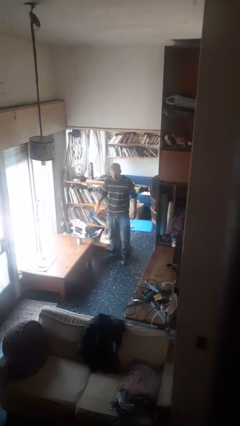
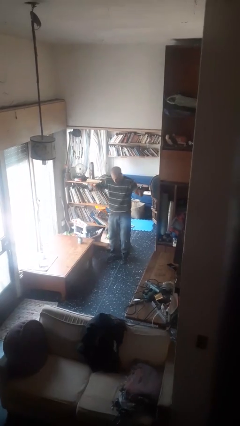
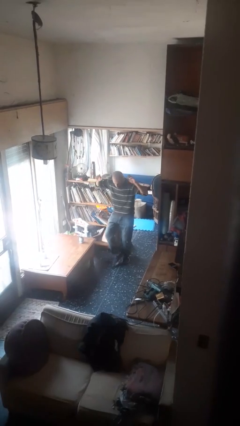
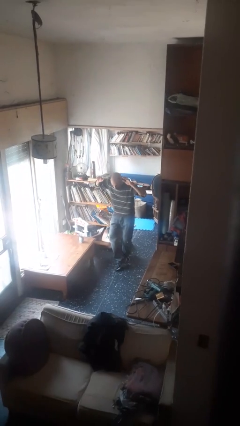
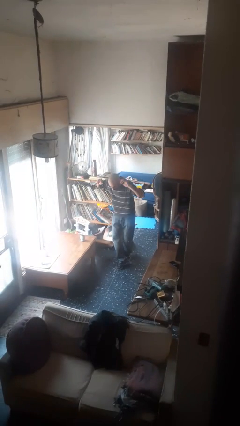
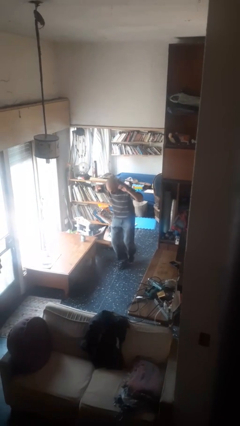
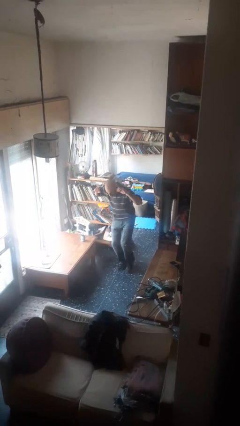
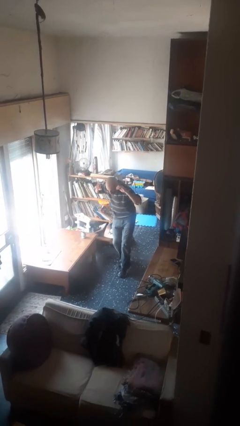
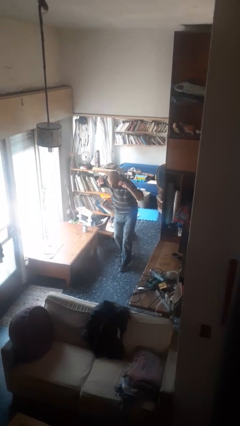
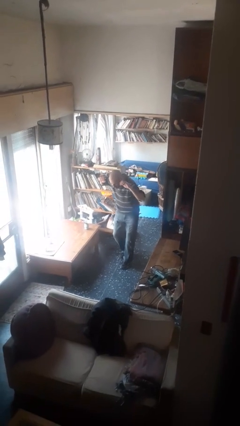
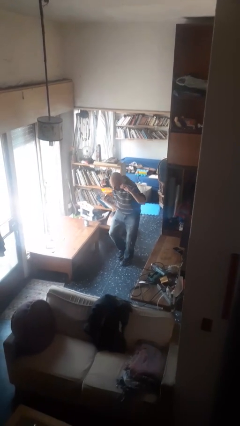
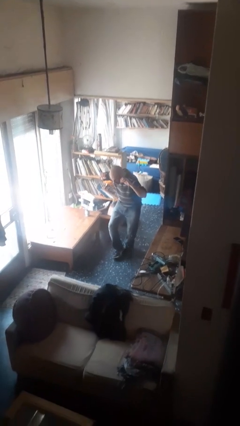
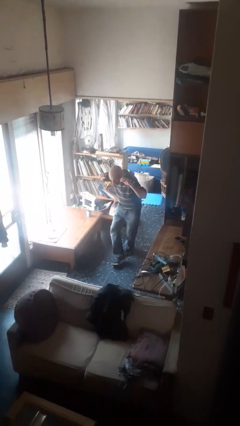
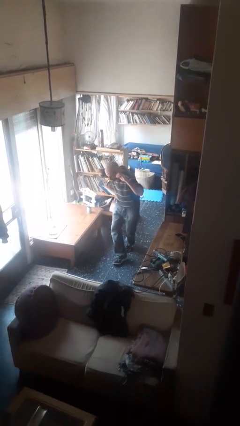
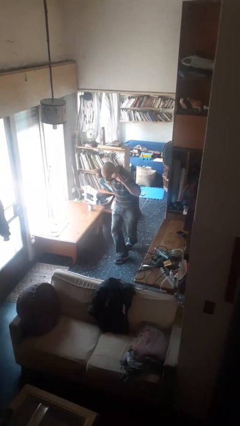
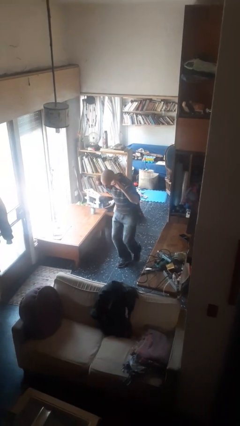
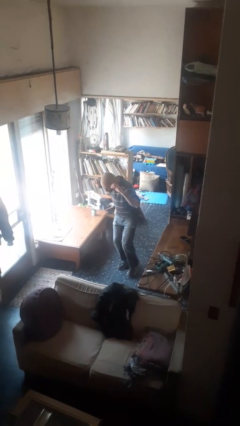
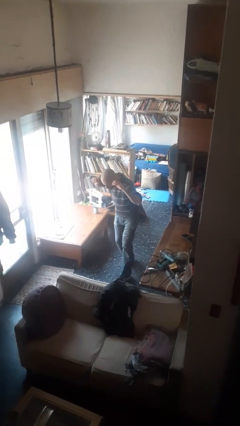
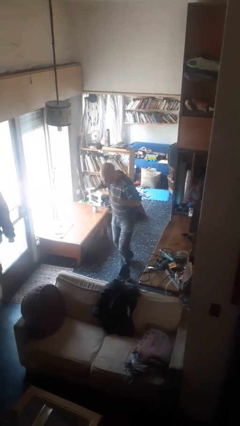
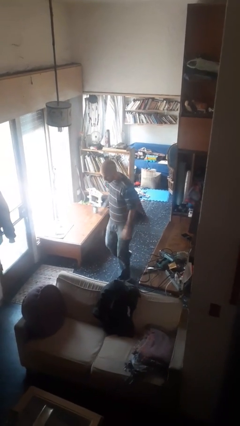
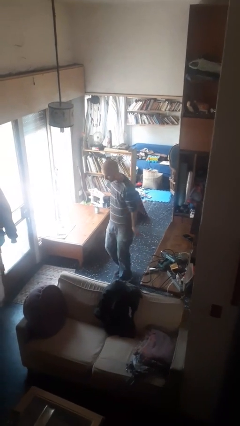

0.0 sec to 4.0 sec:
person walks tiptoe

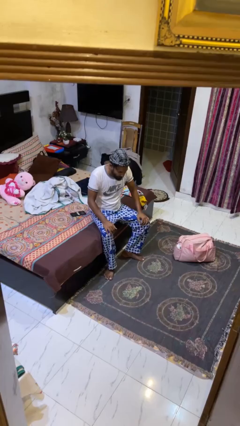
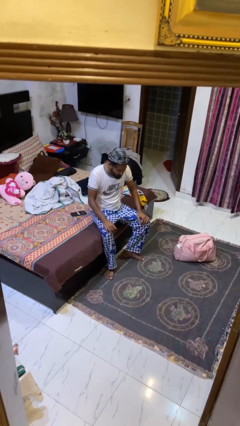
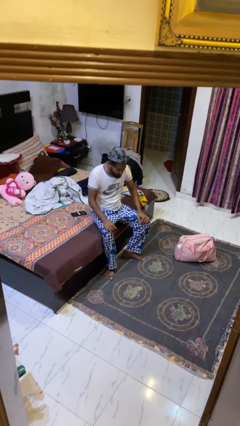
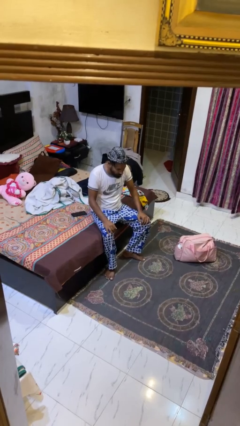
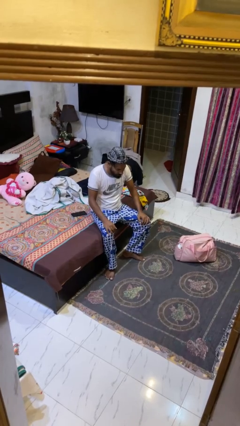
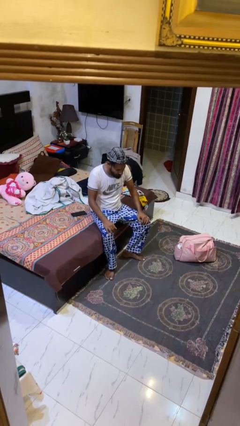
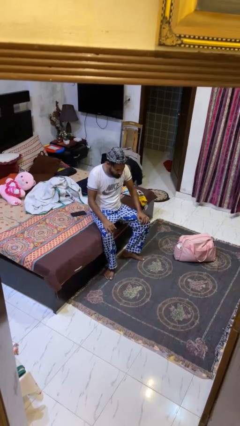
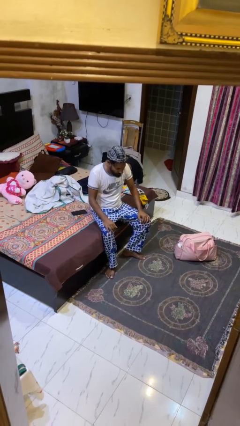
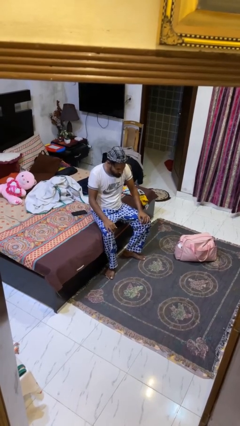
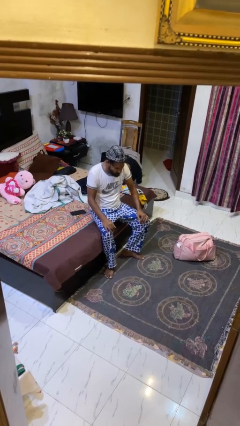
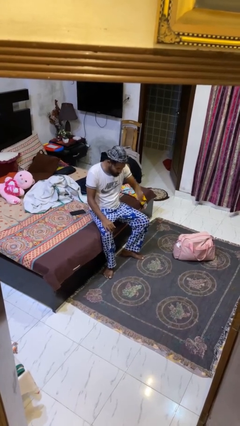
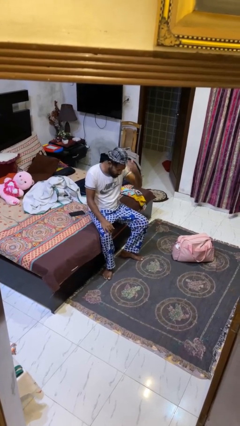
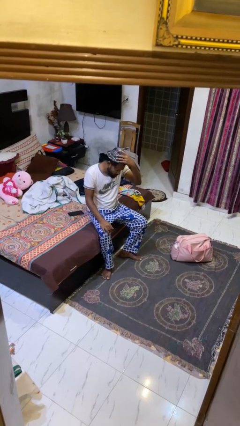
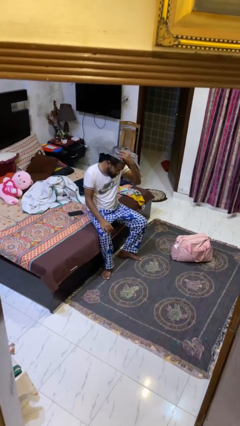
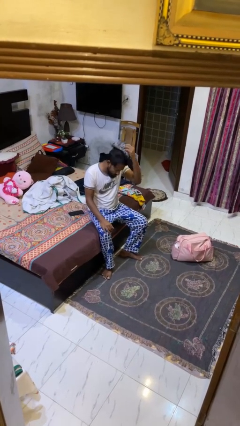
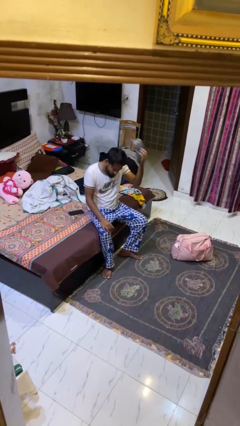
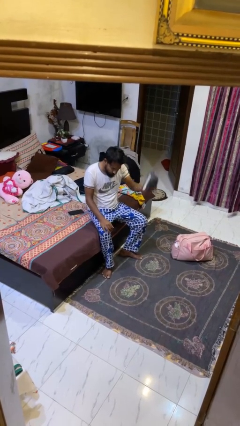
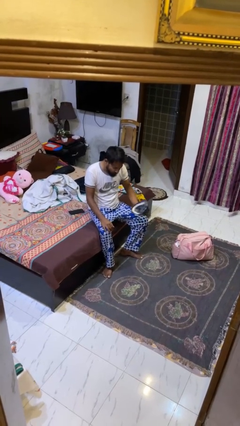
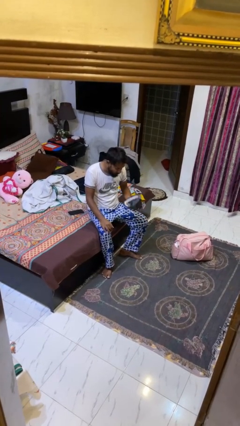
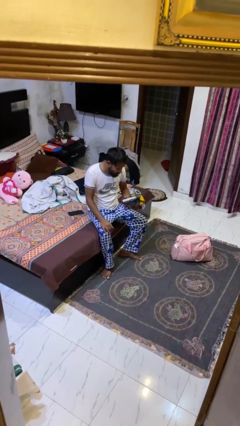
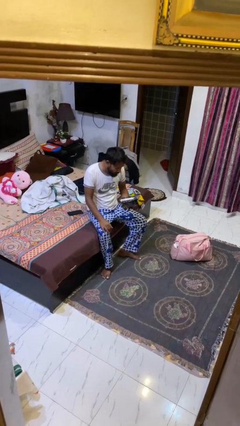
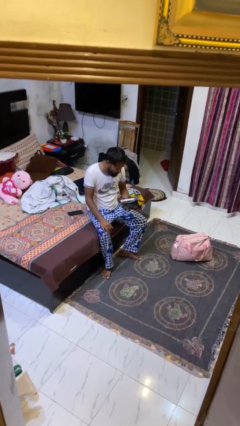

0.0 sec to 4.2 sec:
person takes off hat

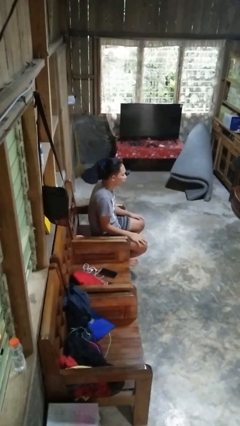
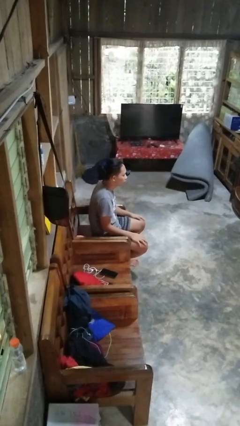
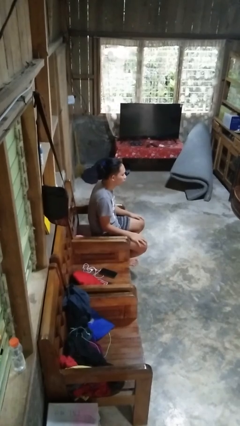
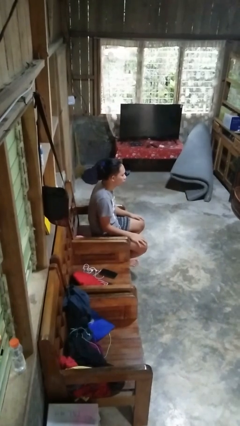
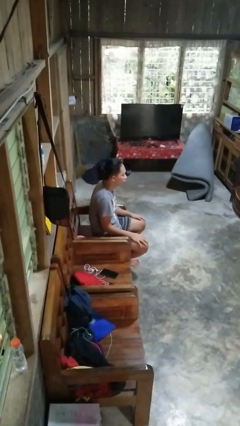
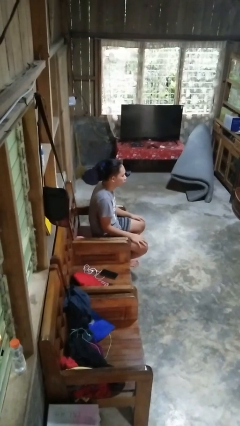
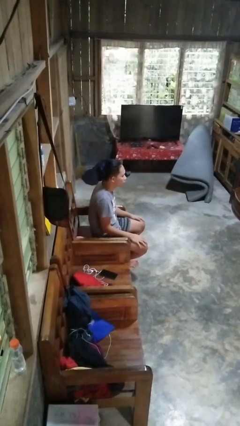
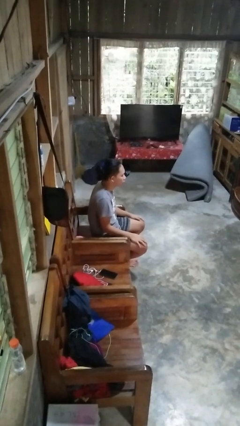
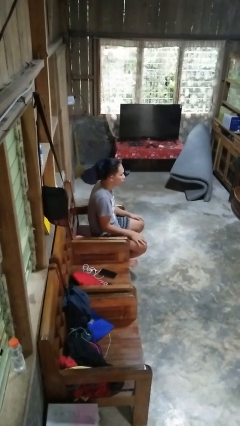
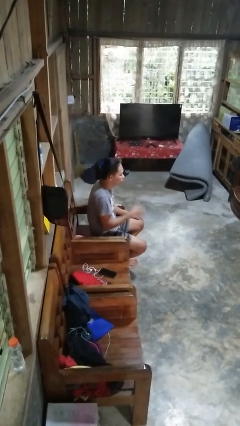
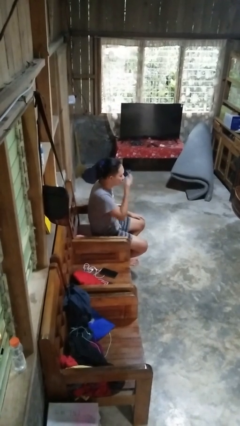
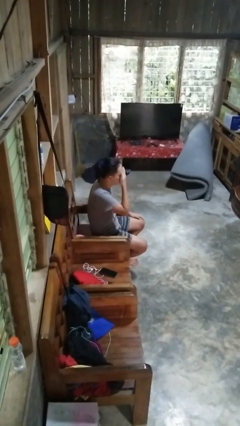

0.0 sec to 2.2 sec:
person covers face with hands

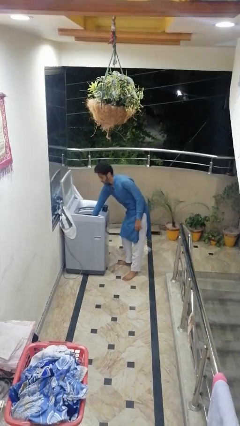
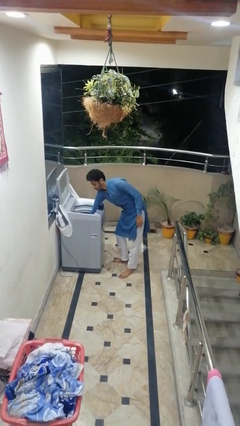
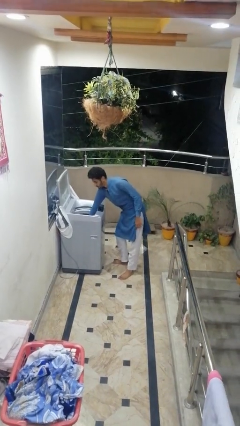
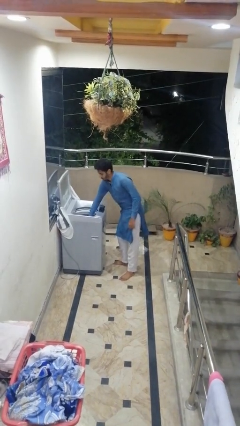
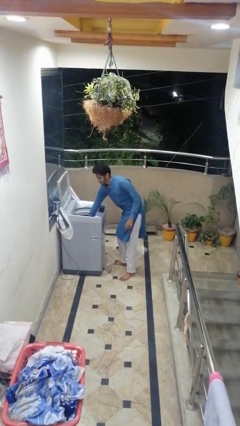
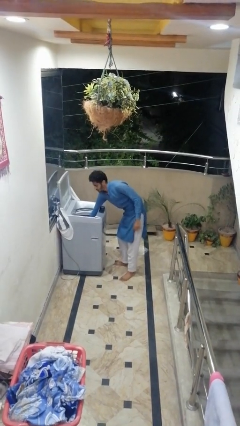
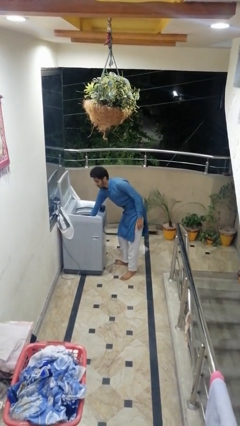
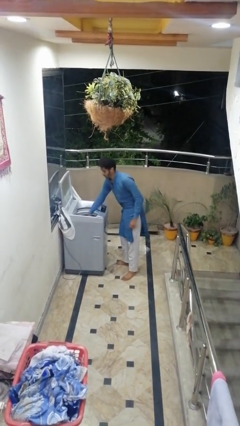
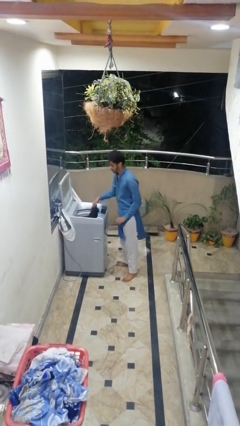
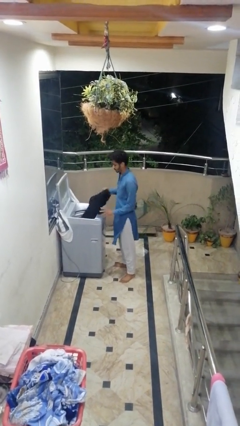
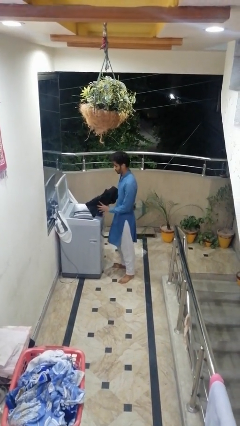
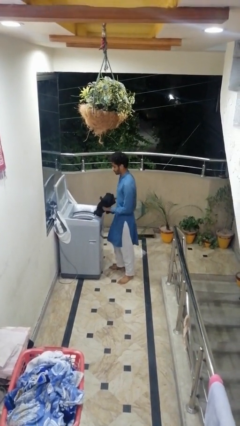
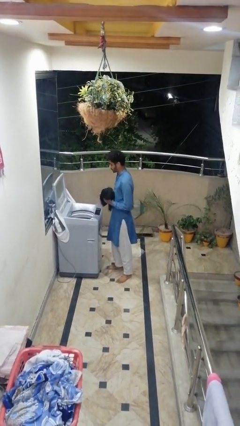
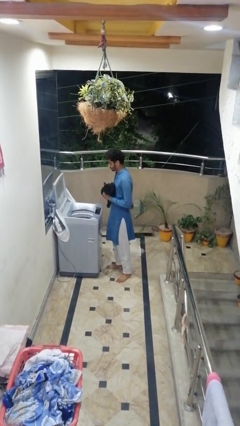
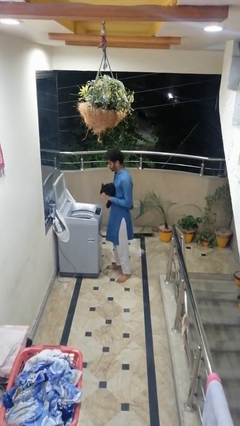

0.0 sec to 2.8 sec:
person loads clotheswasher

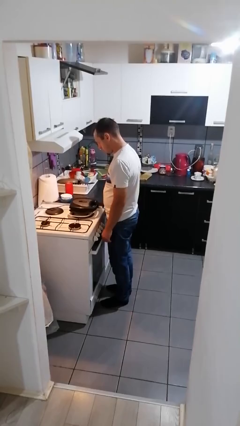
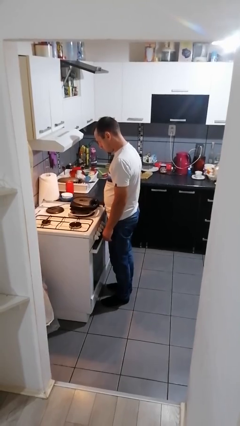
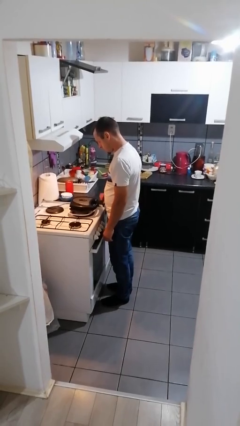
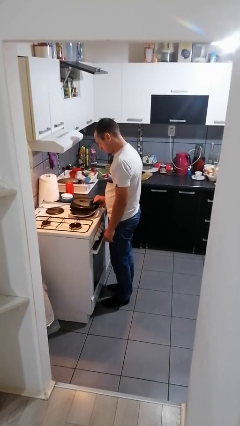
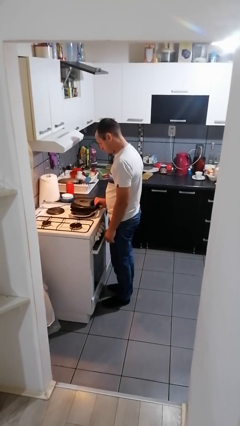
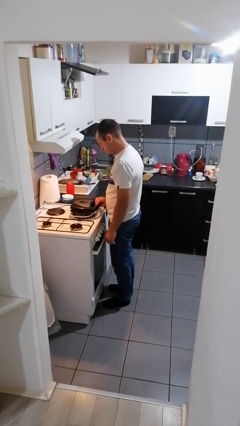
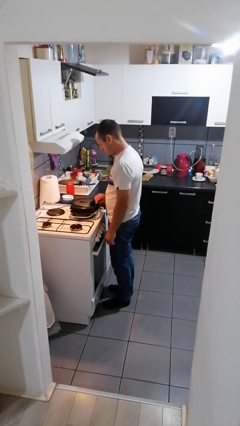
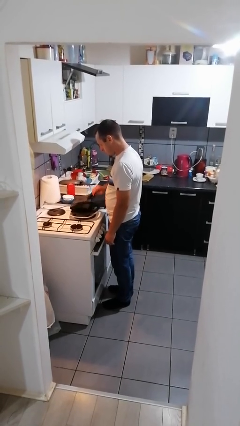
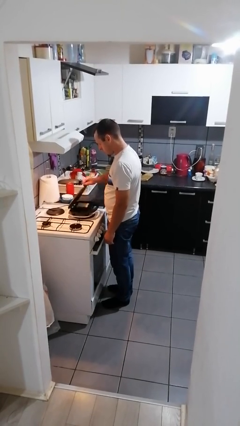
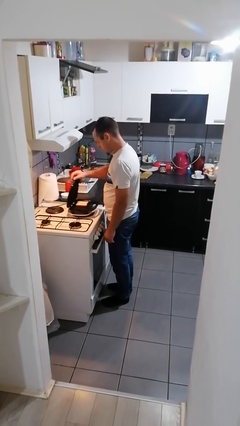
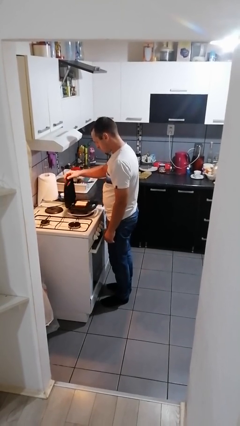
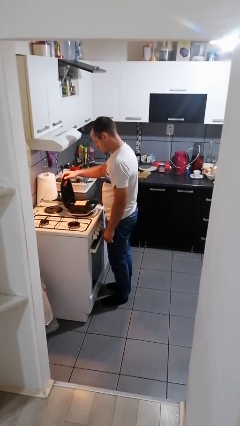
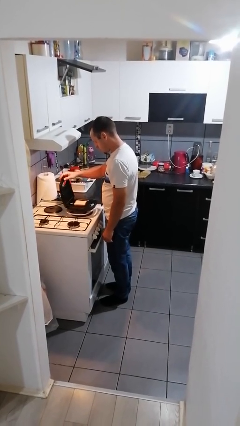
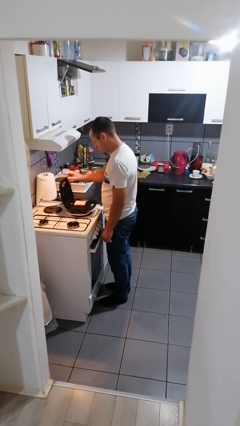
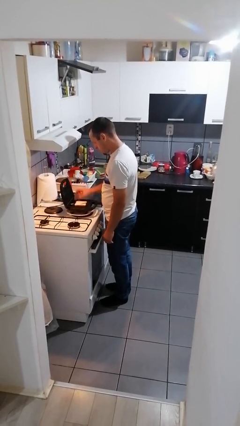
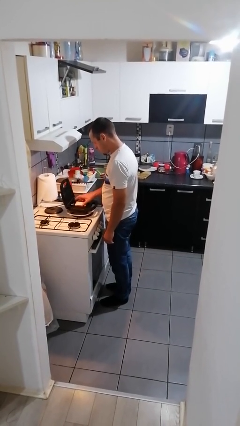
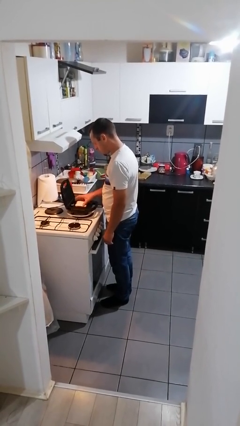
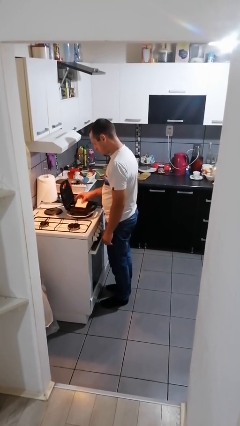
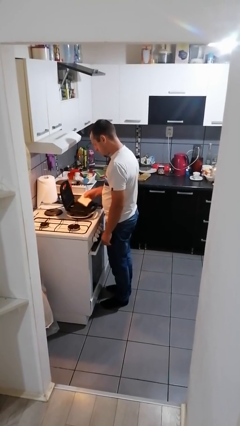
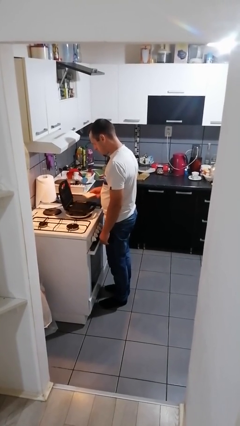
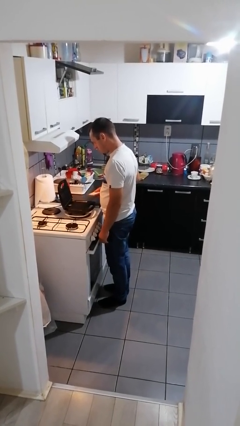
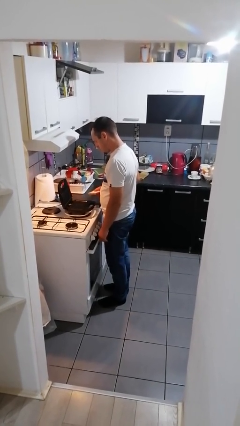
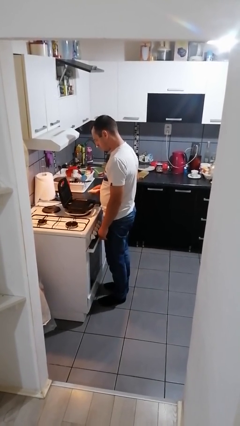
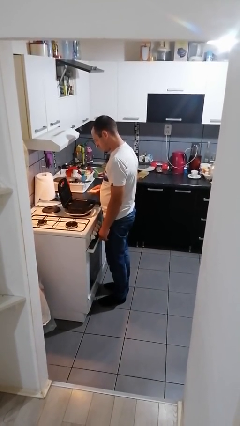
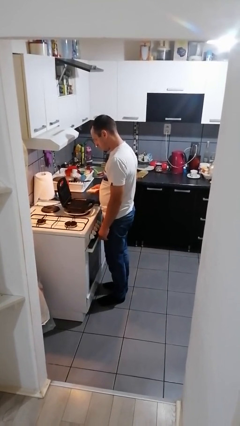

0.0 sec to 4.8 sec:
person takes object from toaster
